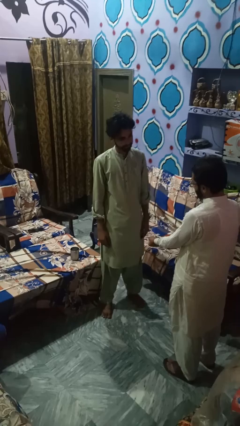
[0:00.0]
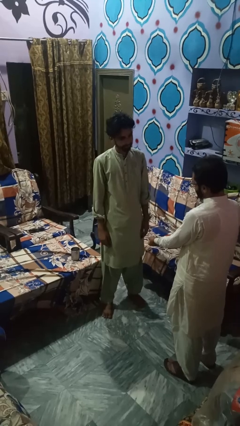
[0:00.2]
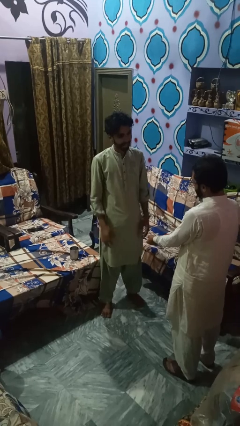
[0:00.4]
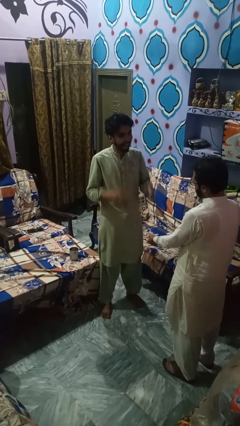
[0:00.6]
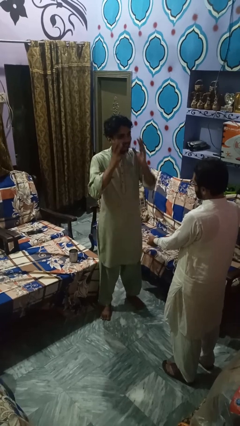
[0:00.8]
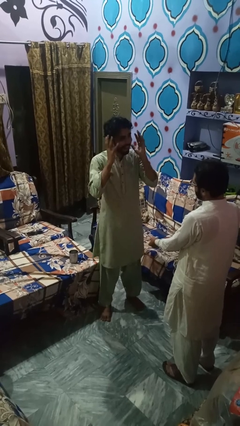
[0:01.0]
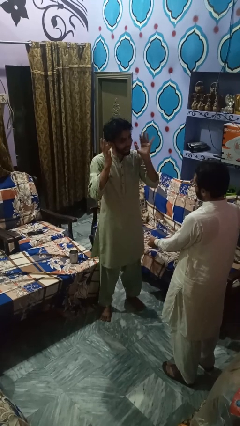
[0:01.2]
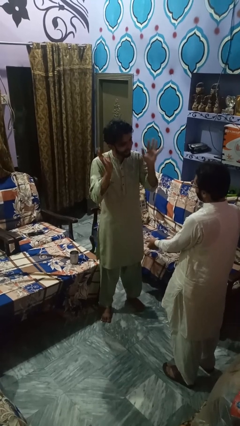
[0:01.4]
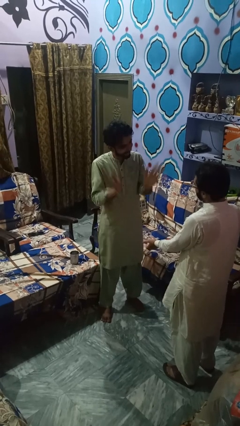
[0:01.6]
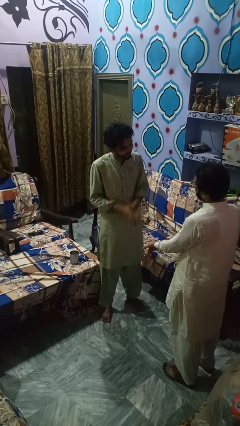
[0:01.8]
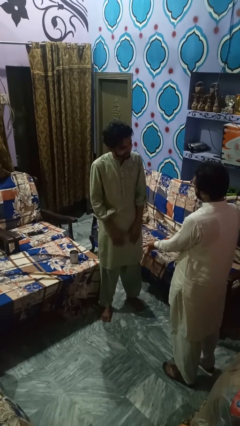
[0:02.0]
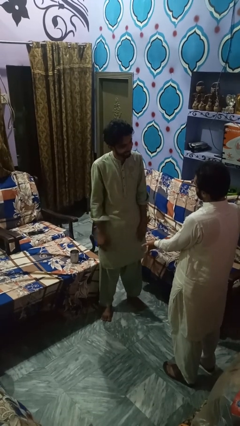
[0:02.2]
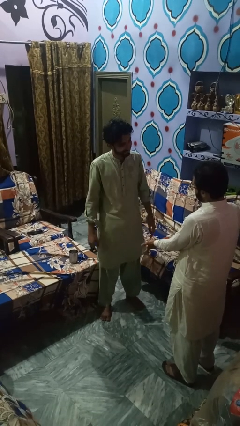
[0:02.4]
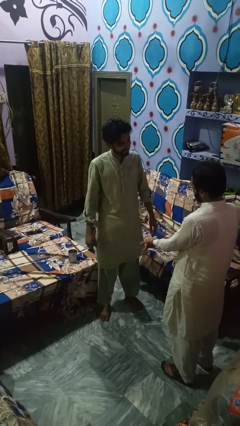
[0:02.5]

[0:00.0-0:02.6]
person laughs with person

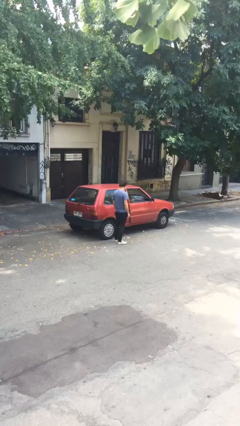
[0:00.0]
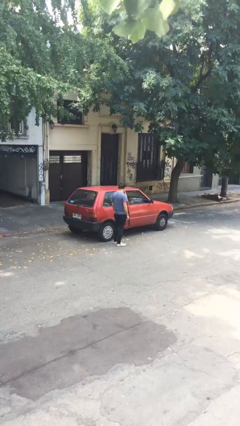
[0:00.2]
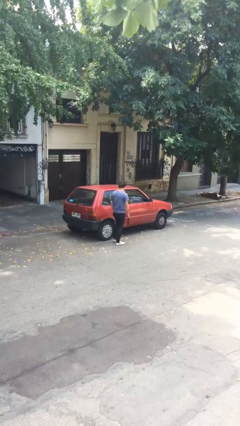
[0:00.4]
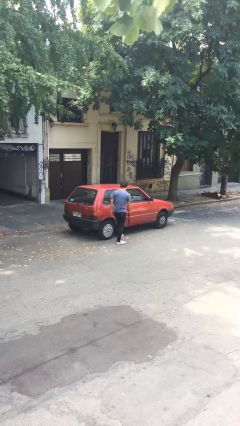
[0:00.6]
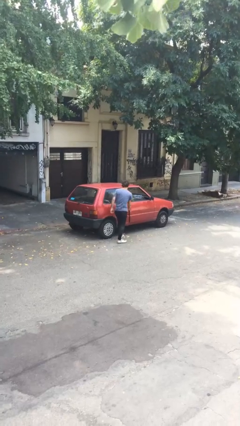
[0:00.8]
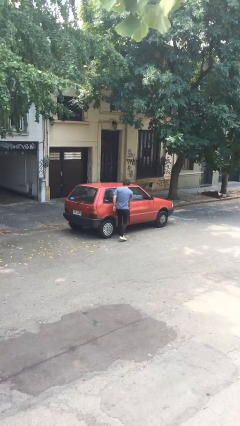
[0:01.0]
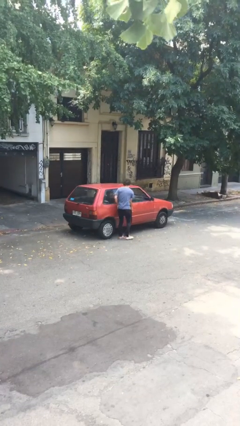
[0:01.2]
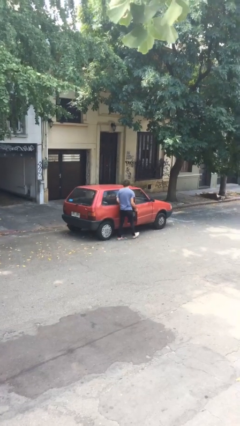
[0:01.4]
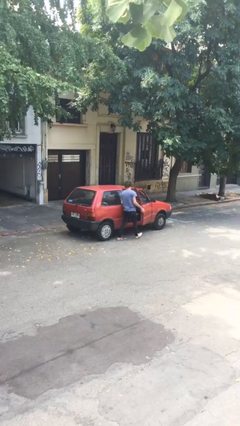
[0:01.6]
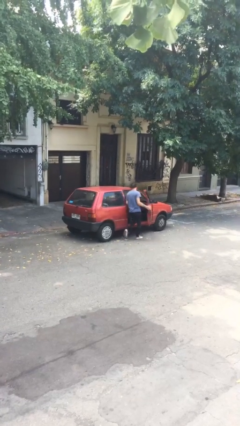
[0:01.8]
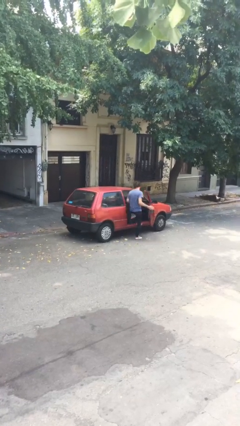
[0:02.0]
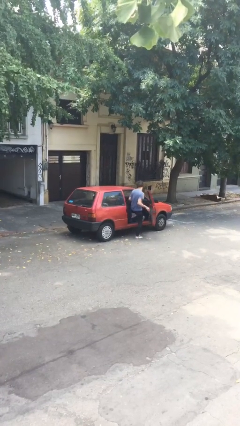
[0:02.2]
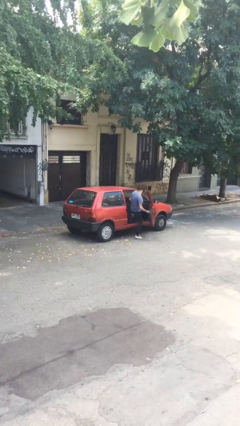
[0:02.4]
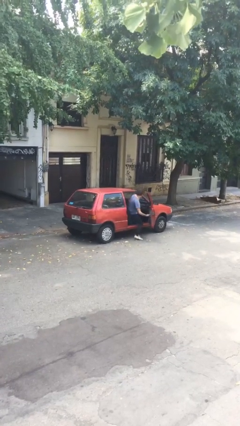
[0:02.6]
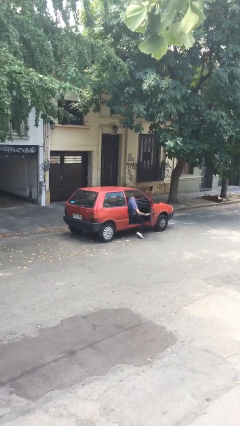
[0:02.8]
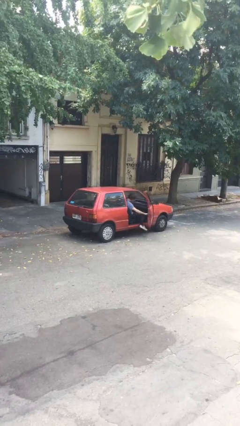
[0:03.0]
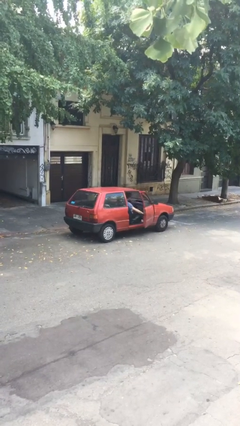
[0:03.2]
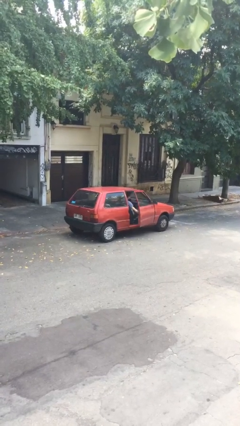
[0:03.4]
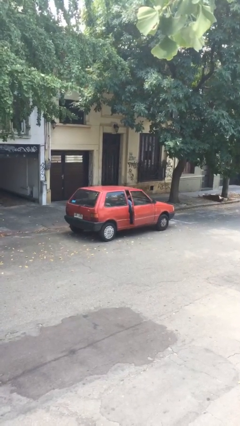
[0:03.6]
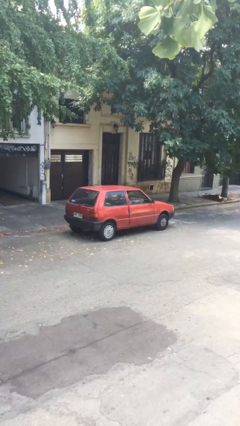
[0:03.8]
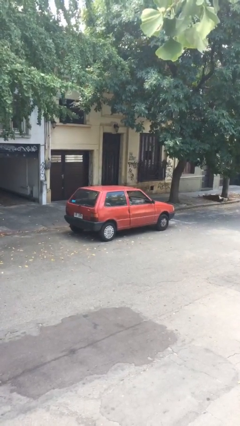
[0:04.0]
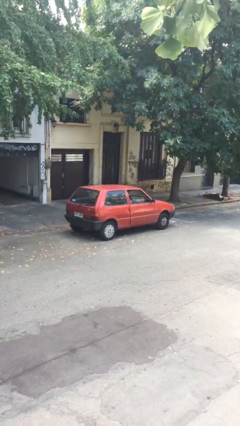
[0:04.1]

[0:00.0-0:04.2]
car picks up person

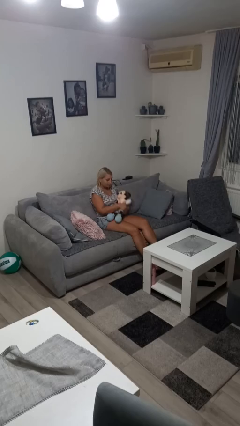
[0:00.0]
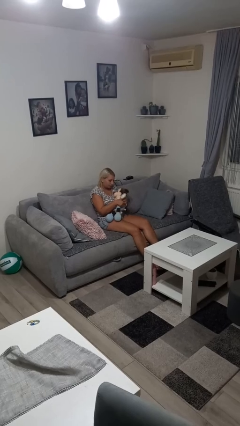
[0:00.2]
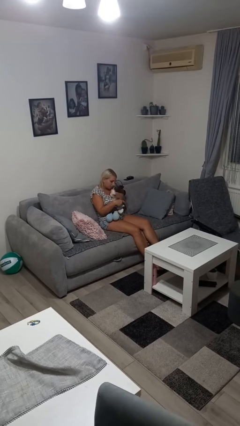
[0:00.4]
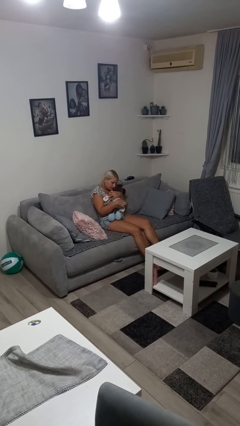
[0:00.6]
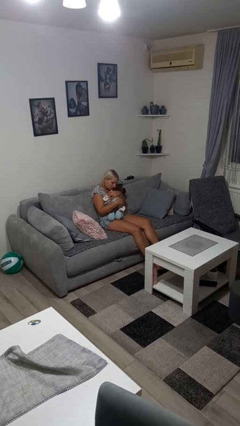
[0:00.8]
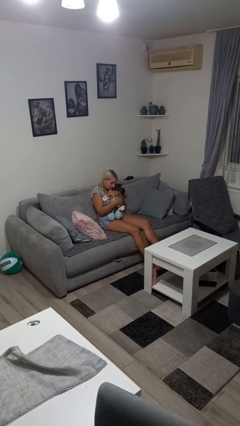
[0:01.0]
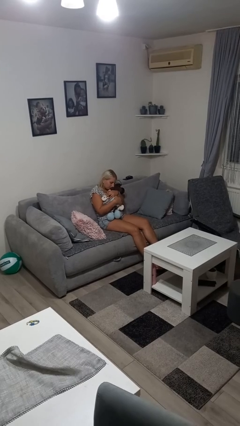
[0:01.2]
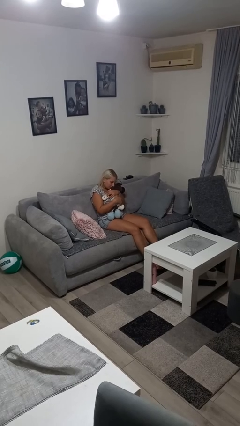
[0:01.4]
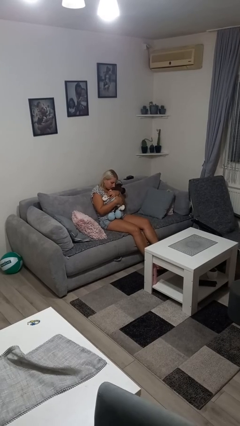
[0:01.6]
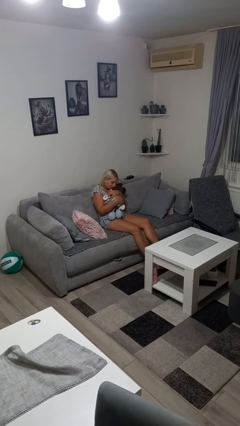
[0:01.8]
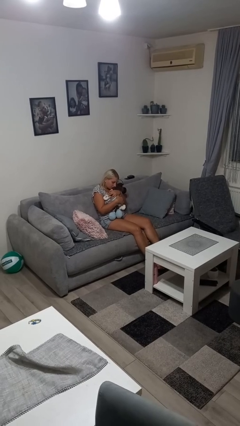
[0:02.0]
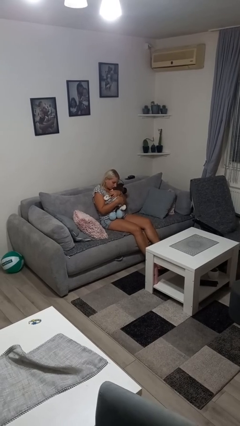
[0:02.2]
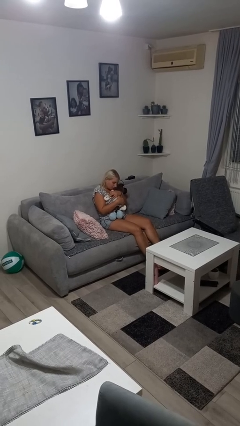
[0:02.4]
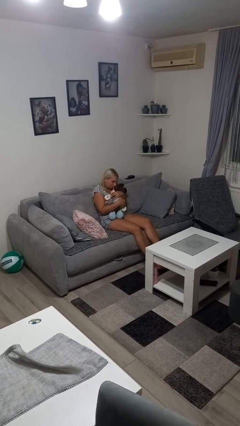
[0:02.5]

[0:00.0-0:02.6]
person hugs stuffed animal

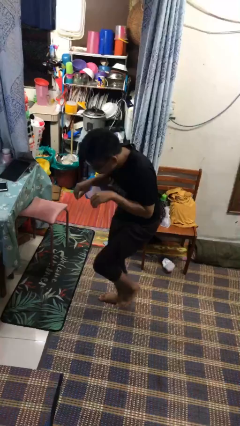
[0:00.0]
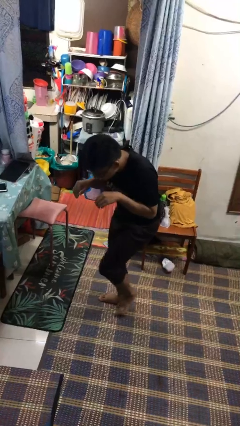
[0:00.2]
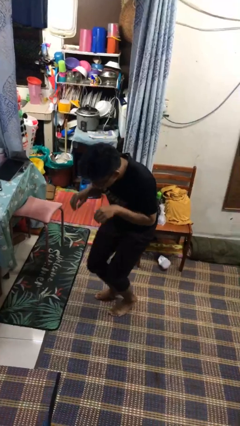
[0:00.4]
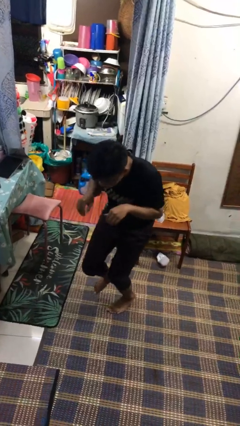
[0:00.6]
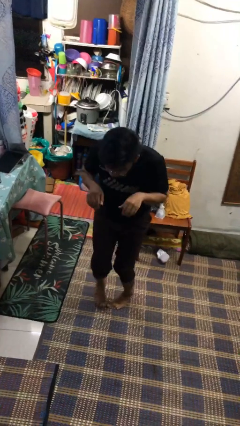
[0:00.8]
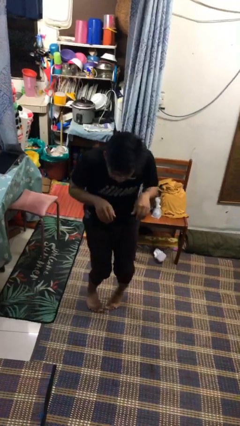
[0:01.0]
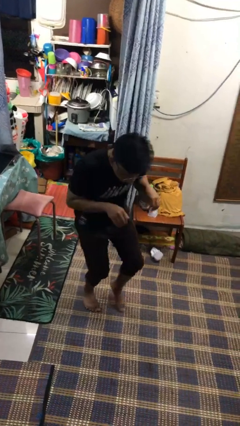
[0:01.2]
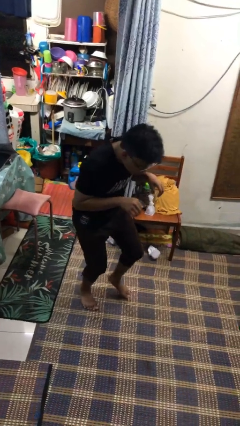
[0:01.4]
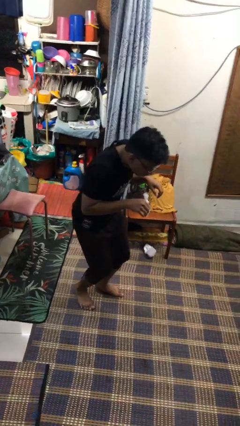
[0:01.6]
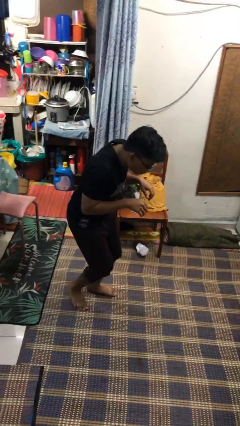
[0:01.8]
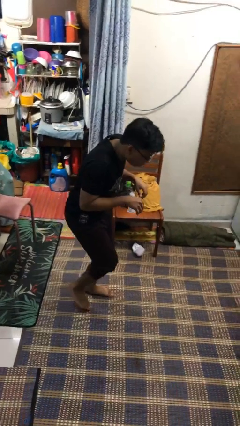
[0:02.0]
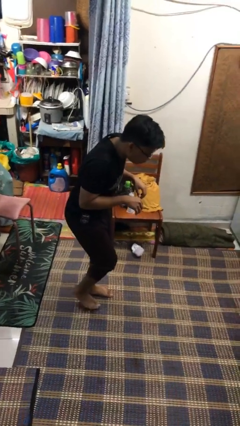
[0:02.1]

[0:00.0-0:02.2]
person walks tiptoe

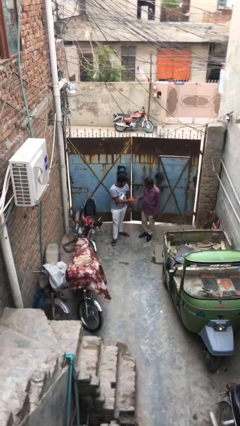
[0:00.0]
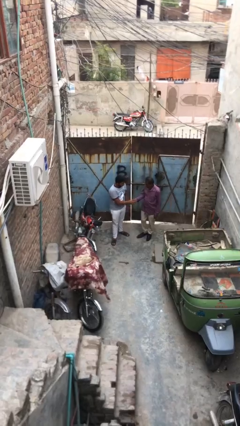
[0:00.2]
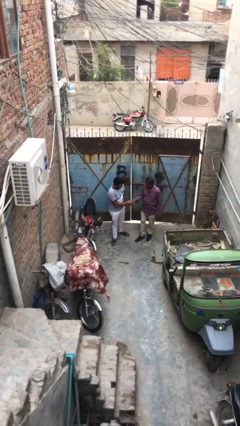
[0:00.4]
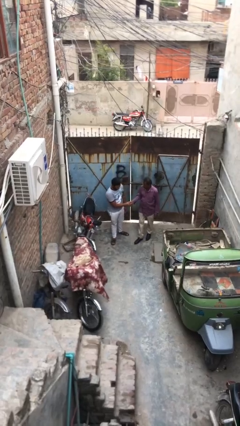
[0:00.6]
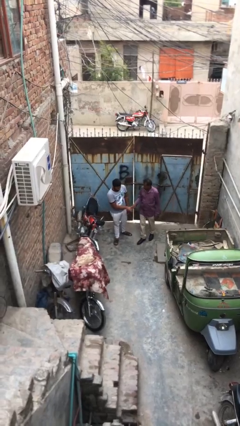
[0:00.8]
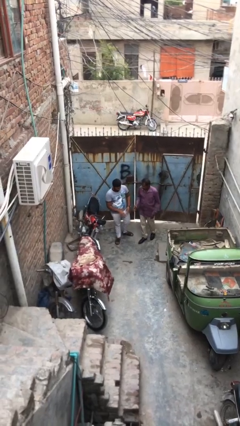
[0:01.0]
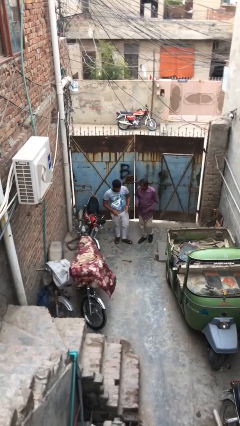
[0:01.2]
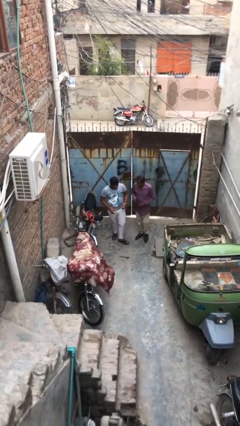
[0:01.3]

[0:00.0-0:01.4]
person shakes hand

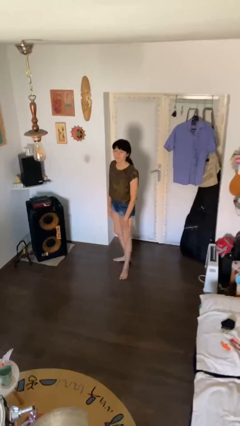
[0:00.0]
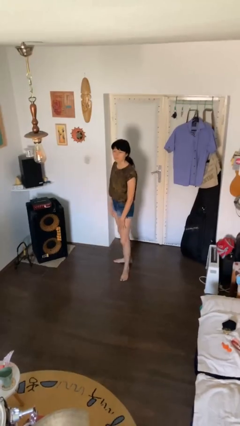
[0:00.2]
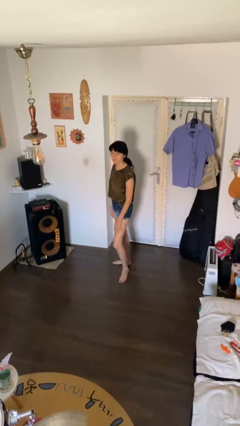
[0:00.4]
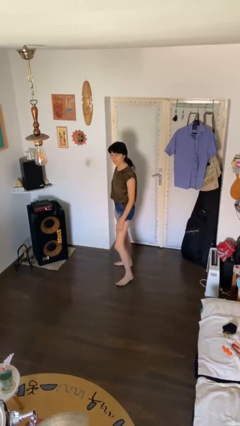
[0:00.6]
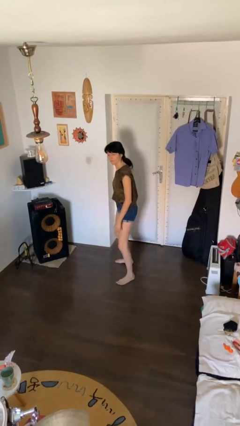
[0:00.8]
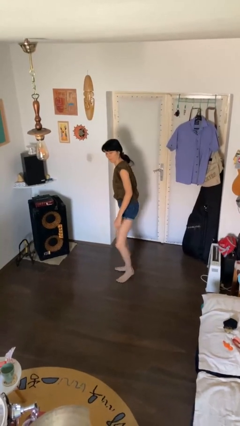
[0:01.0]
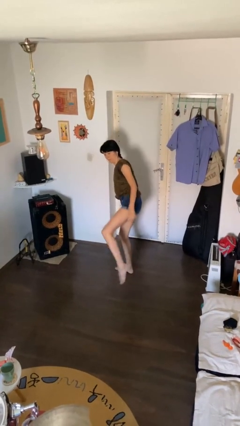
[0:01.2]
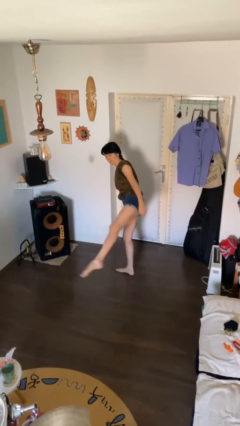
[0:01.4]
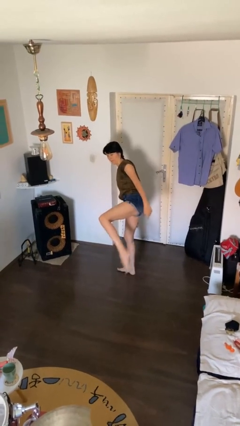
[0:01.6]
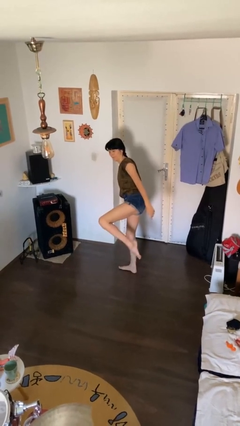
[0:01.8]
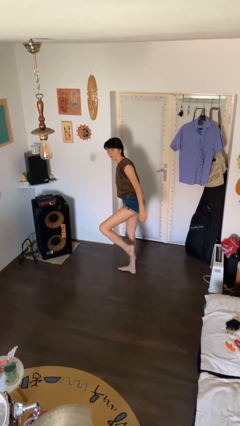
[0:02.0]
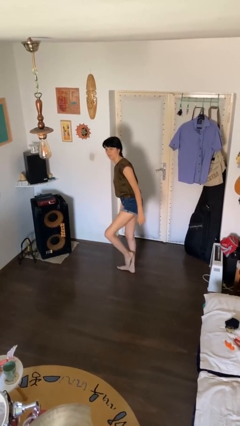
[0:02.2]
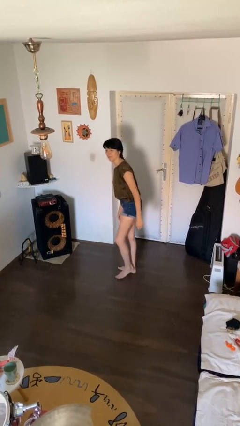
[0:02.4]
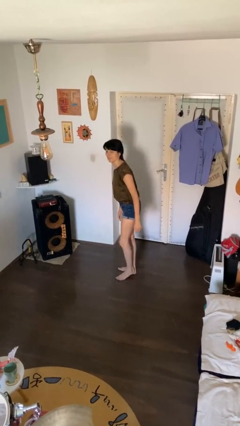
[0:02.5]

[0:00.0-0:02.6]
person karate kicks

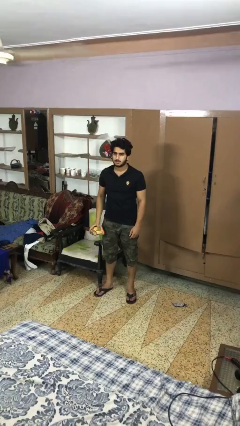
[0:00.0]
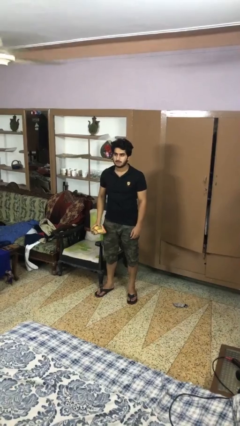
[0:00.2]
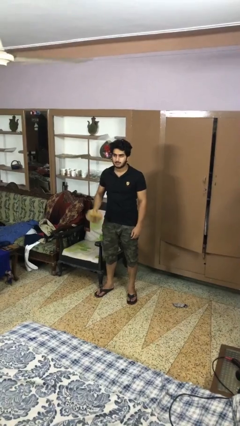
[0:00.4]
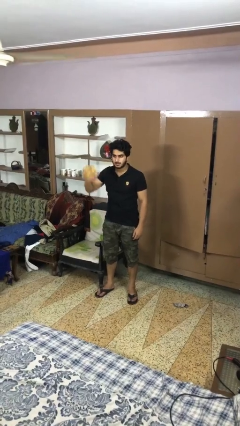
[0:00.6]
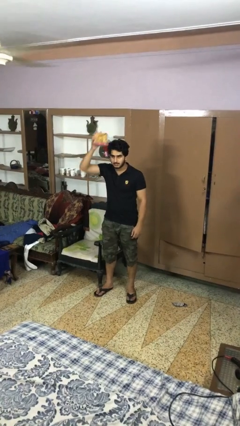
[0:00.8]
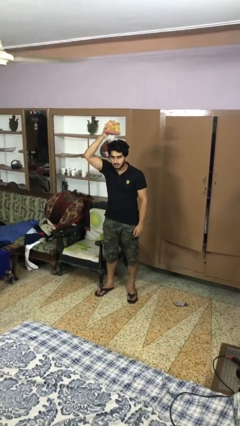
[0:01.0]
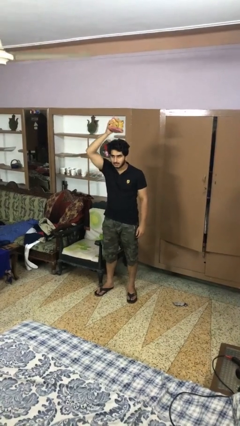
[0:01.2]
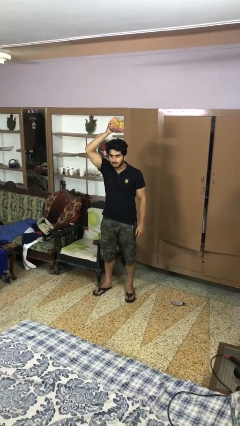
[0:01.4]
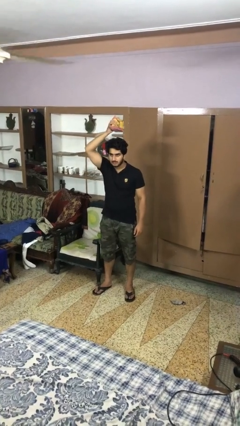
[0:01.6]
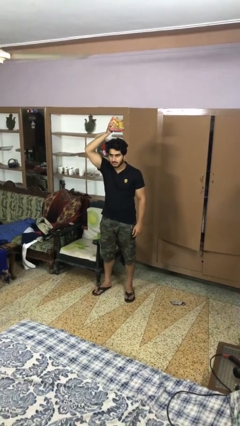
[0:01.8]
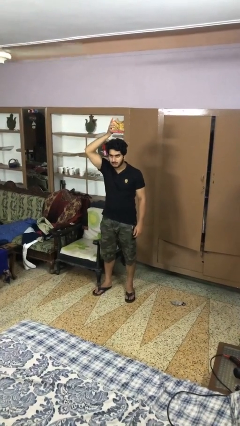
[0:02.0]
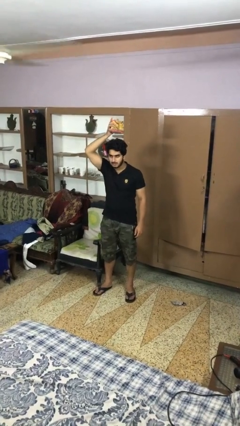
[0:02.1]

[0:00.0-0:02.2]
person holds object above head
